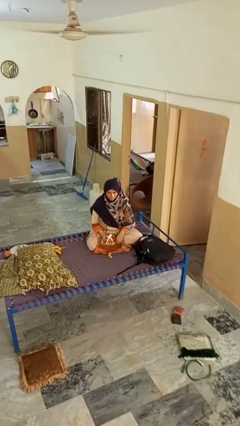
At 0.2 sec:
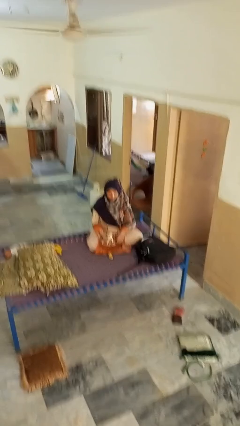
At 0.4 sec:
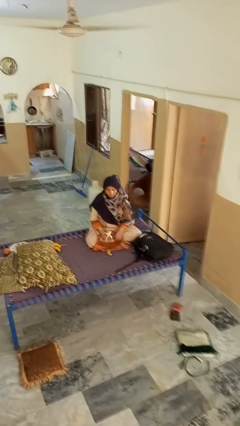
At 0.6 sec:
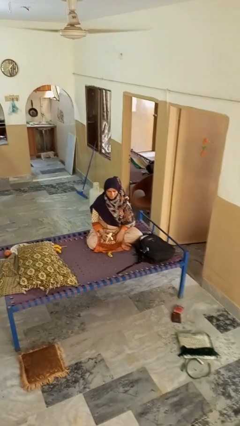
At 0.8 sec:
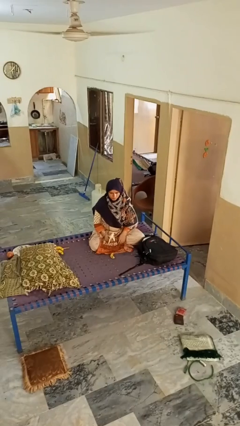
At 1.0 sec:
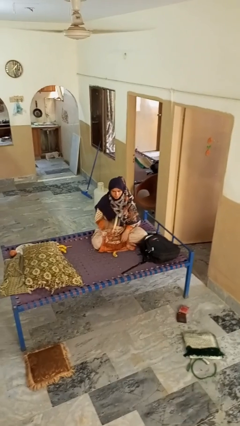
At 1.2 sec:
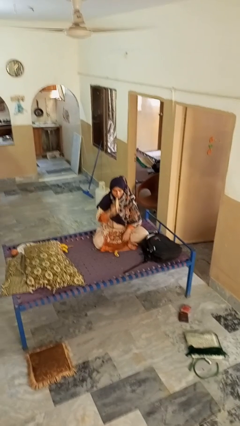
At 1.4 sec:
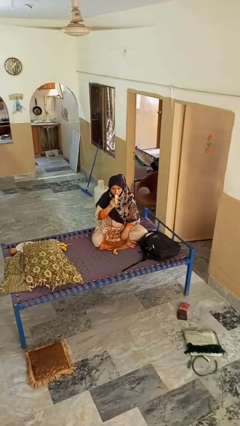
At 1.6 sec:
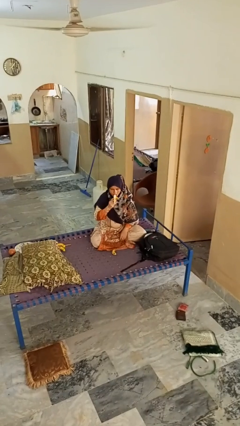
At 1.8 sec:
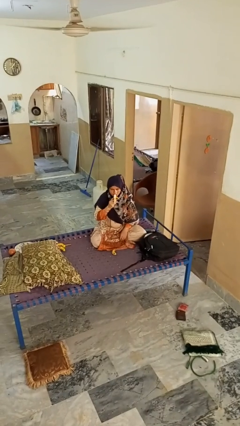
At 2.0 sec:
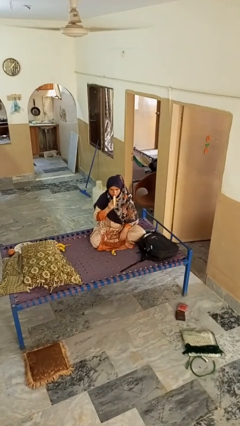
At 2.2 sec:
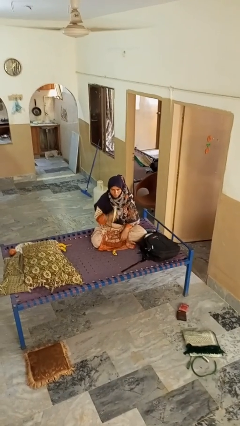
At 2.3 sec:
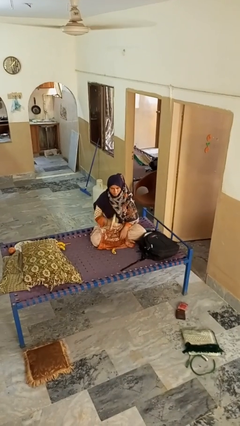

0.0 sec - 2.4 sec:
person eats banana

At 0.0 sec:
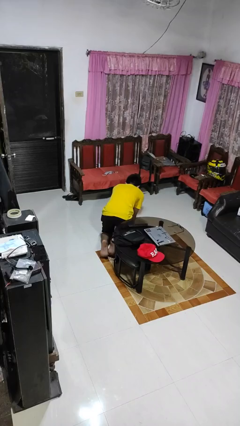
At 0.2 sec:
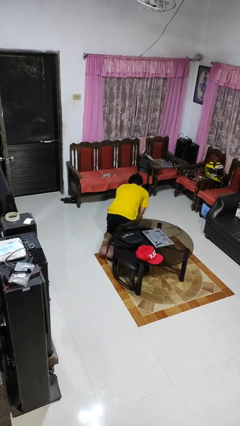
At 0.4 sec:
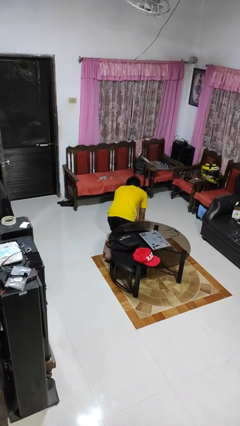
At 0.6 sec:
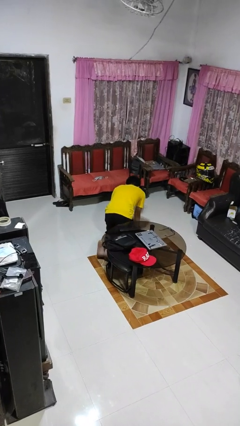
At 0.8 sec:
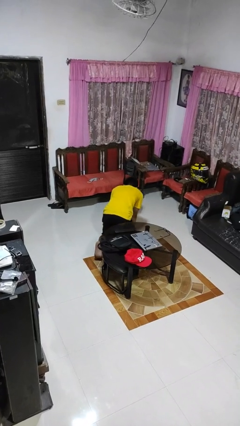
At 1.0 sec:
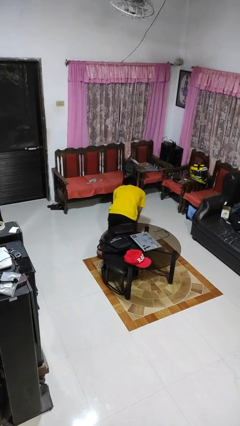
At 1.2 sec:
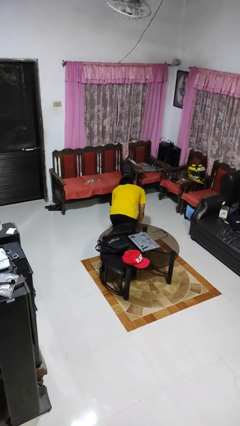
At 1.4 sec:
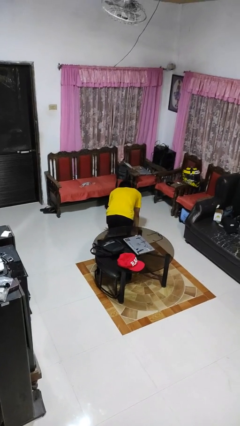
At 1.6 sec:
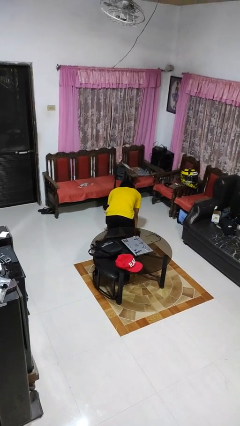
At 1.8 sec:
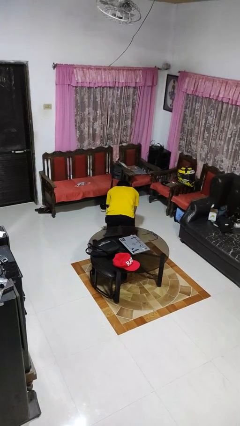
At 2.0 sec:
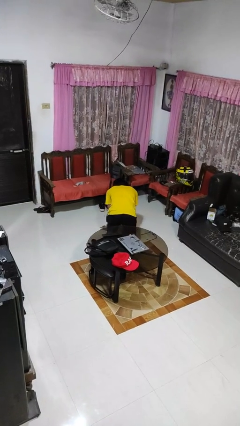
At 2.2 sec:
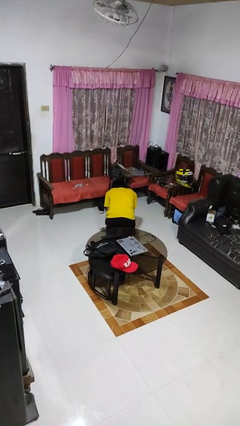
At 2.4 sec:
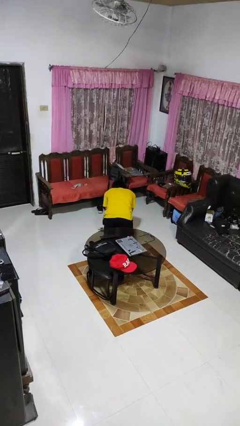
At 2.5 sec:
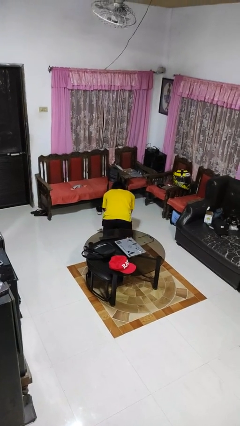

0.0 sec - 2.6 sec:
person crawls

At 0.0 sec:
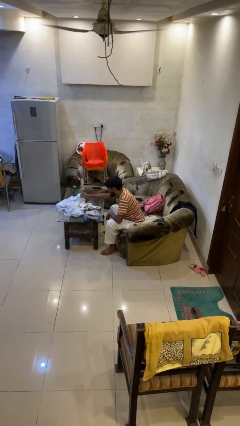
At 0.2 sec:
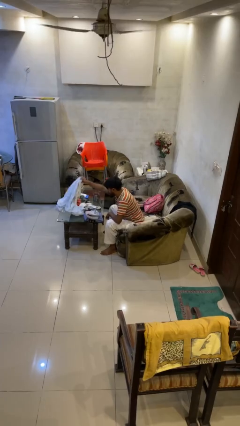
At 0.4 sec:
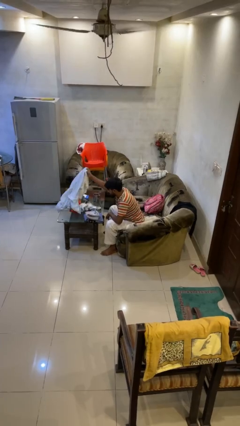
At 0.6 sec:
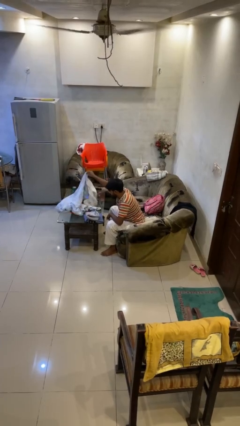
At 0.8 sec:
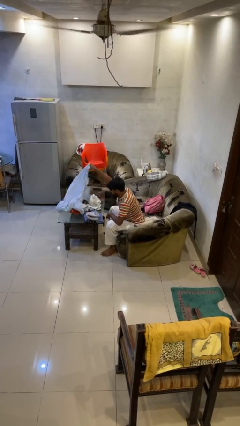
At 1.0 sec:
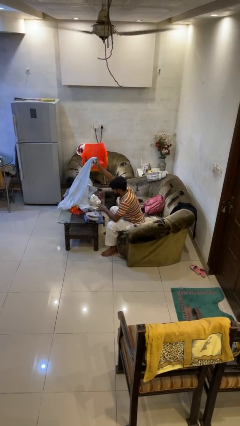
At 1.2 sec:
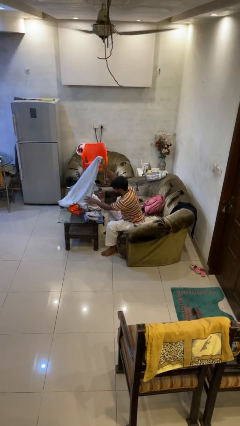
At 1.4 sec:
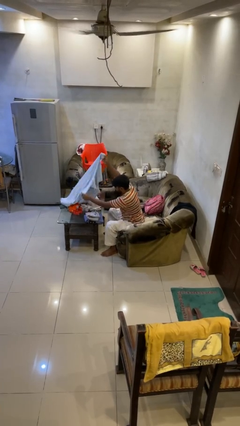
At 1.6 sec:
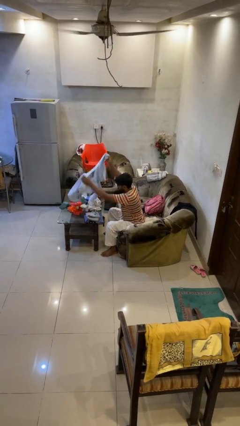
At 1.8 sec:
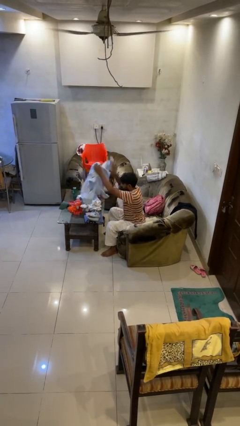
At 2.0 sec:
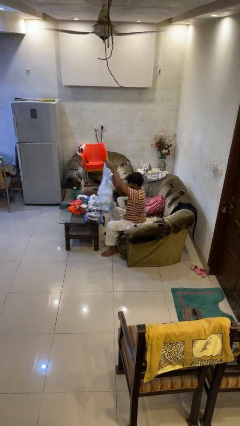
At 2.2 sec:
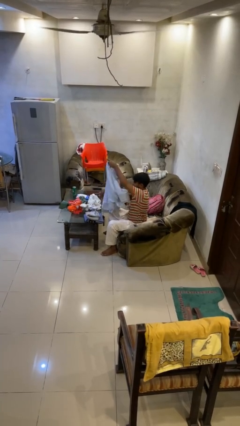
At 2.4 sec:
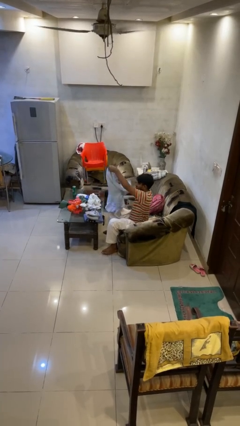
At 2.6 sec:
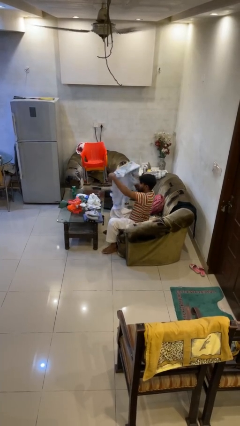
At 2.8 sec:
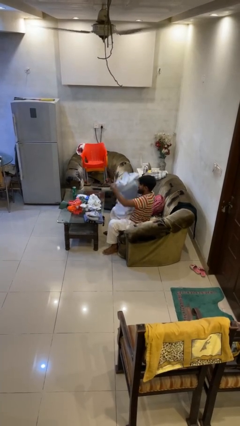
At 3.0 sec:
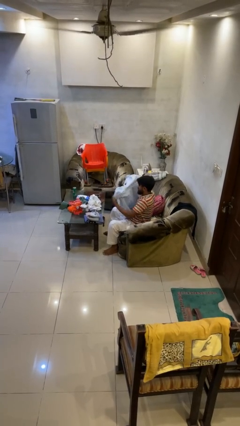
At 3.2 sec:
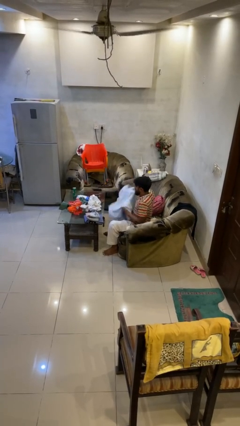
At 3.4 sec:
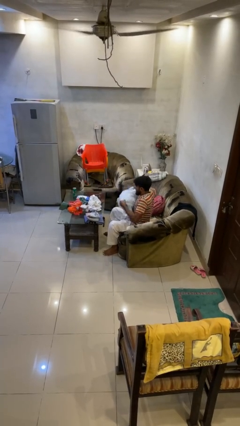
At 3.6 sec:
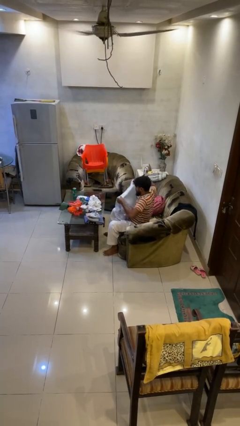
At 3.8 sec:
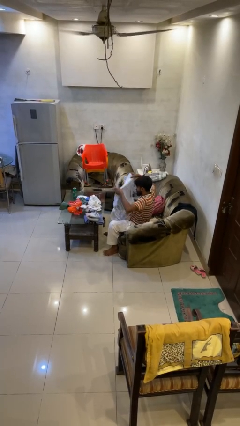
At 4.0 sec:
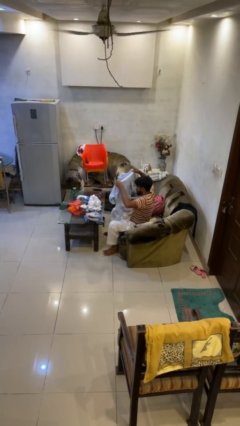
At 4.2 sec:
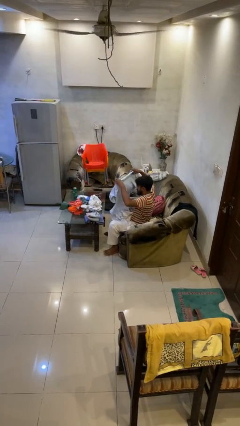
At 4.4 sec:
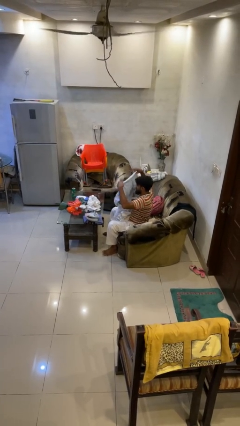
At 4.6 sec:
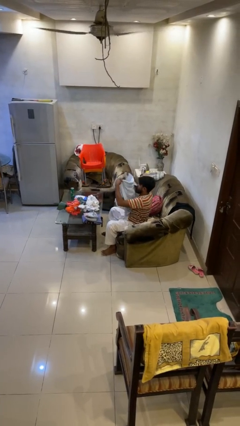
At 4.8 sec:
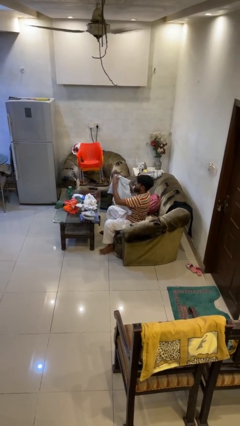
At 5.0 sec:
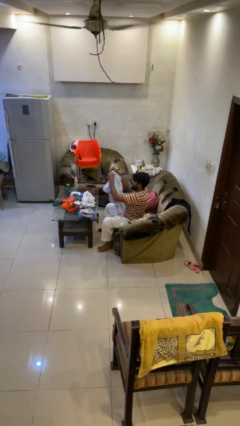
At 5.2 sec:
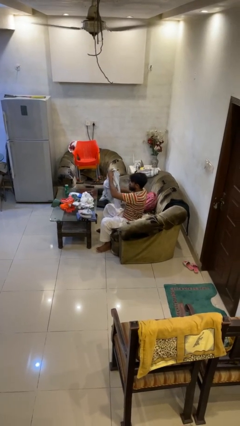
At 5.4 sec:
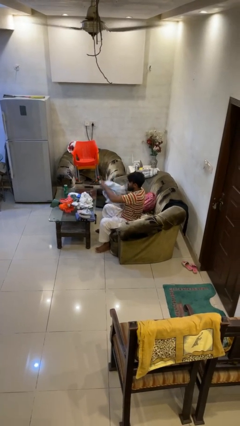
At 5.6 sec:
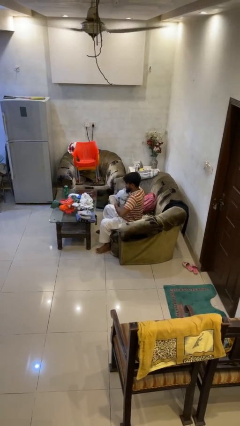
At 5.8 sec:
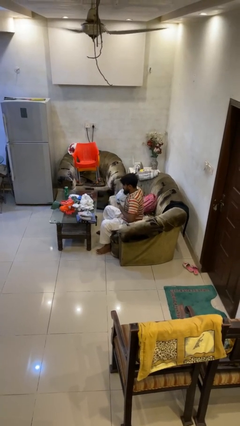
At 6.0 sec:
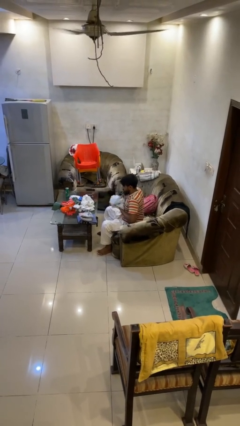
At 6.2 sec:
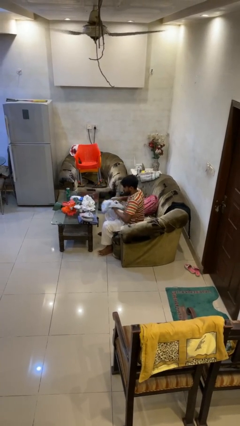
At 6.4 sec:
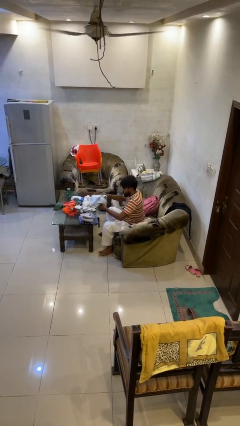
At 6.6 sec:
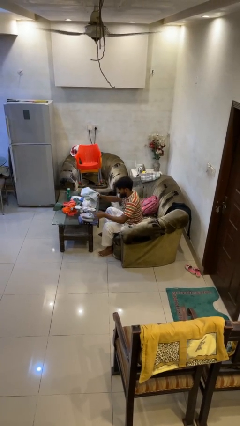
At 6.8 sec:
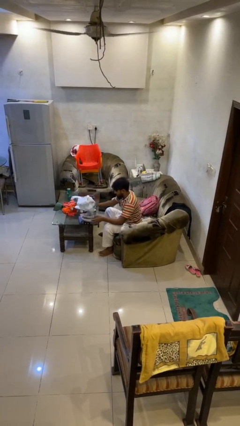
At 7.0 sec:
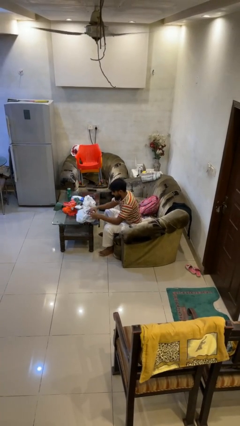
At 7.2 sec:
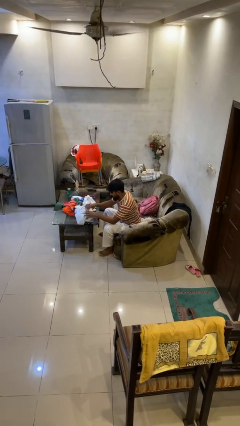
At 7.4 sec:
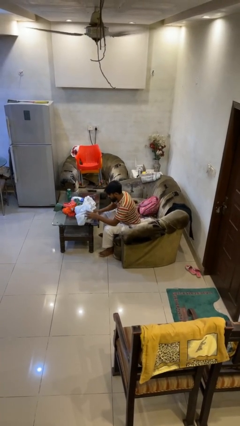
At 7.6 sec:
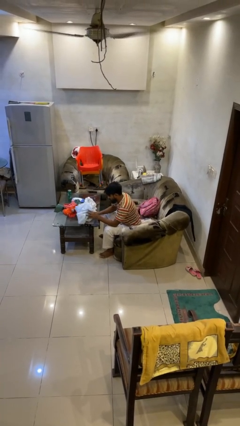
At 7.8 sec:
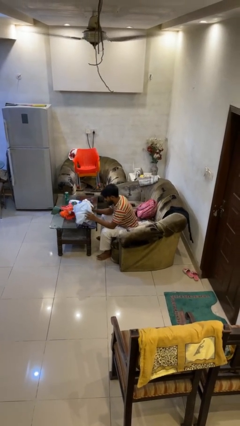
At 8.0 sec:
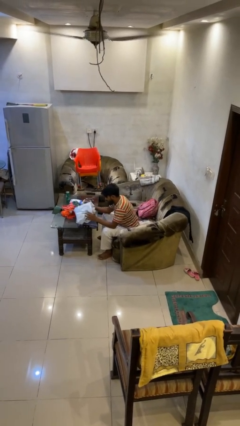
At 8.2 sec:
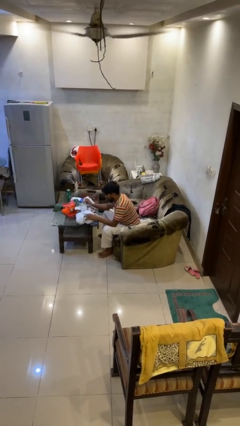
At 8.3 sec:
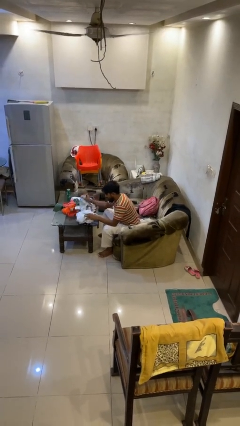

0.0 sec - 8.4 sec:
person folds shirt

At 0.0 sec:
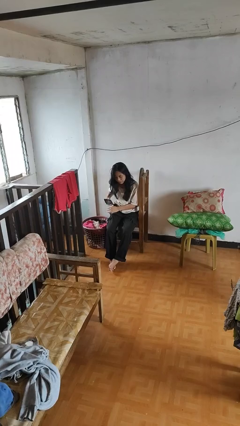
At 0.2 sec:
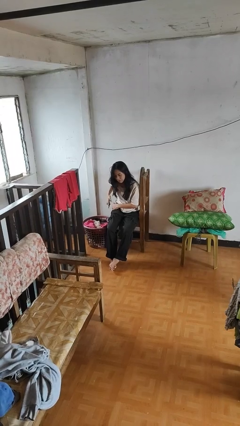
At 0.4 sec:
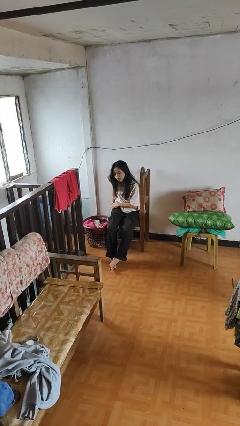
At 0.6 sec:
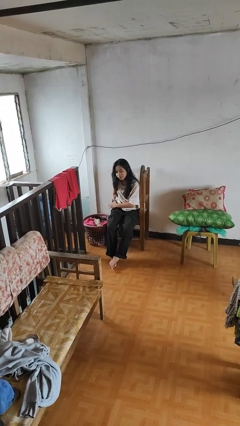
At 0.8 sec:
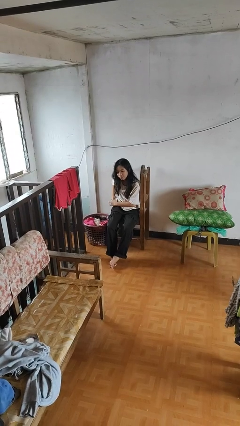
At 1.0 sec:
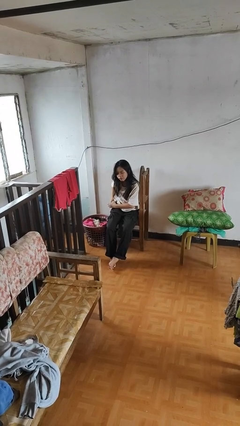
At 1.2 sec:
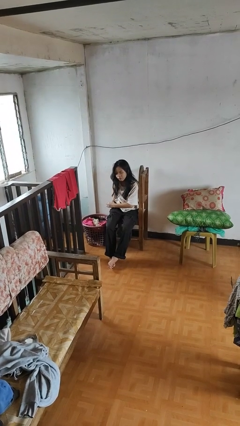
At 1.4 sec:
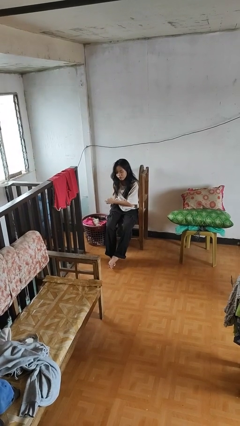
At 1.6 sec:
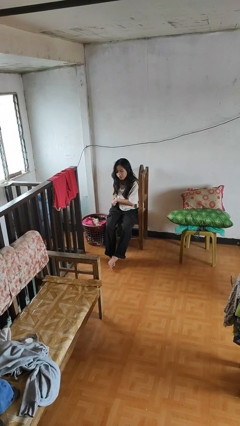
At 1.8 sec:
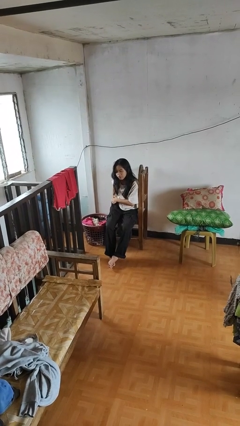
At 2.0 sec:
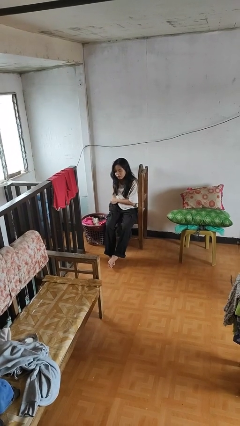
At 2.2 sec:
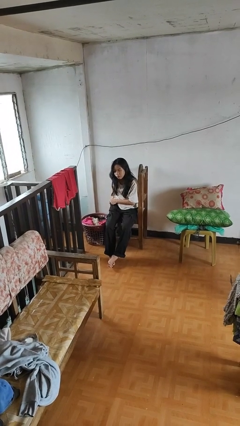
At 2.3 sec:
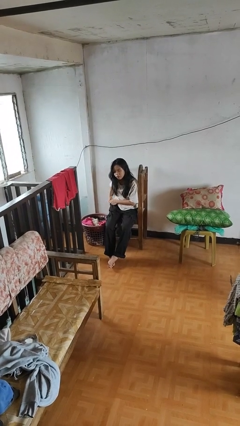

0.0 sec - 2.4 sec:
person puts phone into pocket

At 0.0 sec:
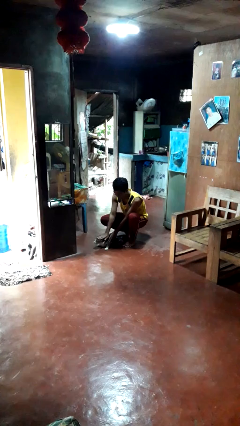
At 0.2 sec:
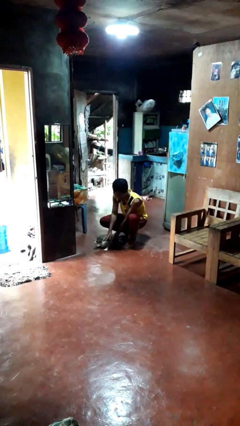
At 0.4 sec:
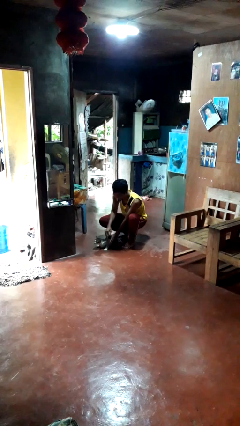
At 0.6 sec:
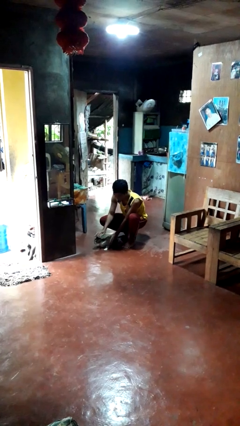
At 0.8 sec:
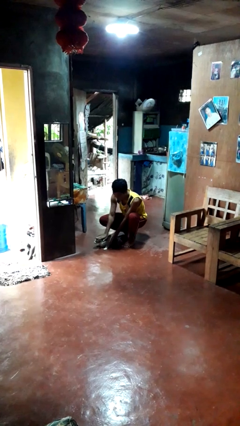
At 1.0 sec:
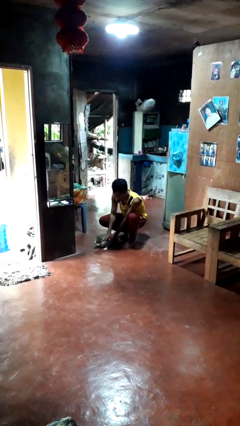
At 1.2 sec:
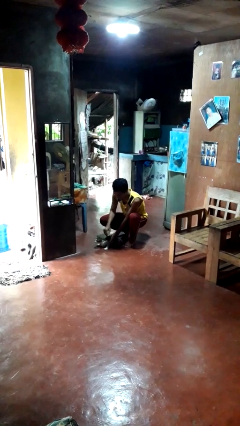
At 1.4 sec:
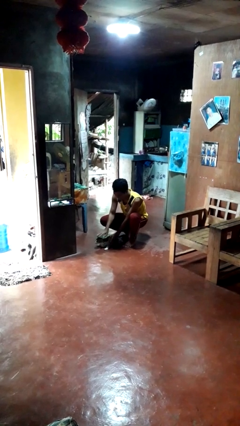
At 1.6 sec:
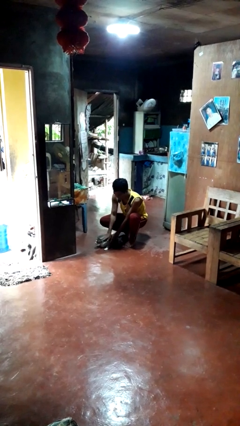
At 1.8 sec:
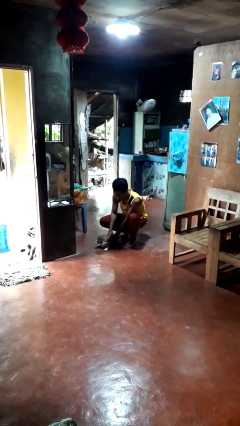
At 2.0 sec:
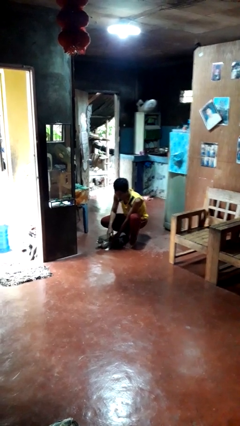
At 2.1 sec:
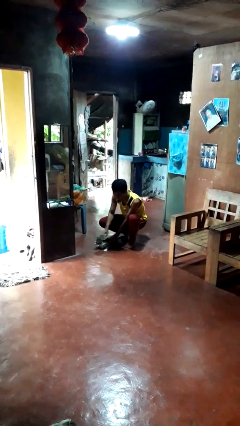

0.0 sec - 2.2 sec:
person pets cat
